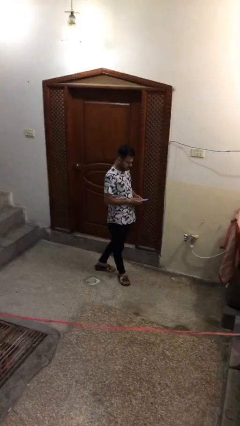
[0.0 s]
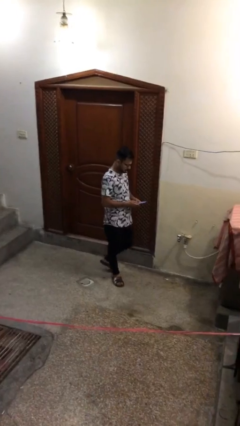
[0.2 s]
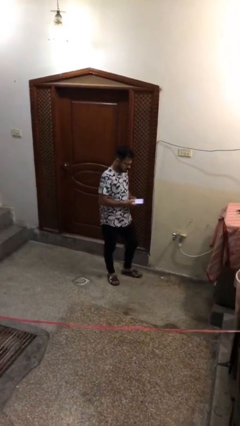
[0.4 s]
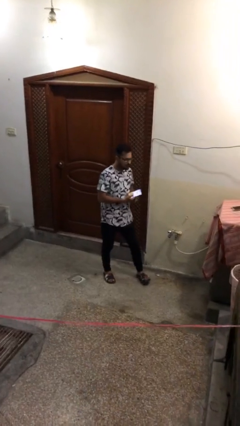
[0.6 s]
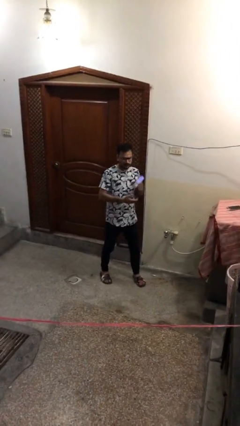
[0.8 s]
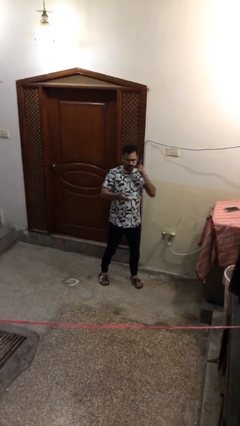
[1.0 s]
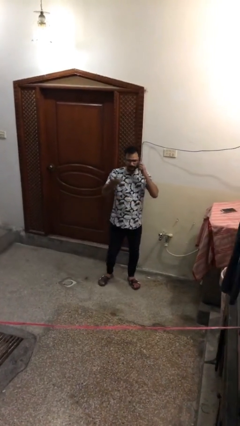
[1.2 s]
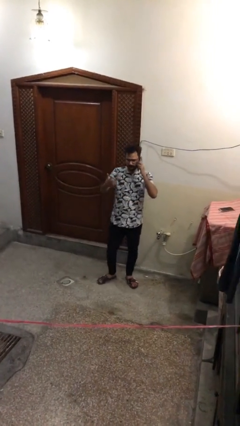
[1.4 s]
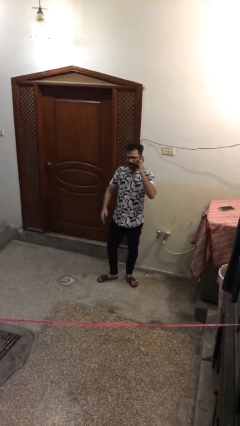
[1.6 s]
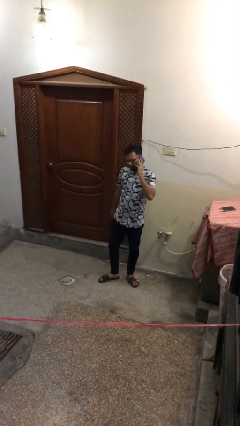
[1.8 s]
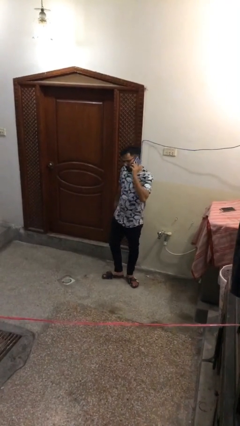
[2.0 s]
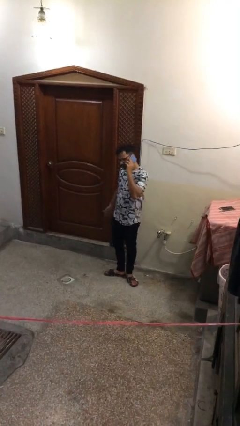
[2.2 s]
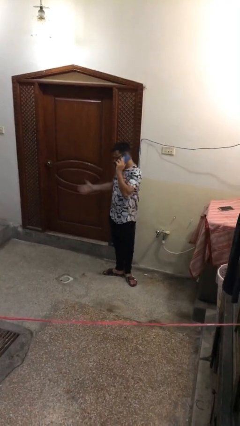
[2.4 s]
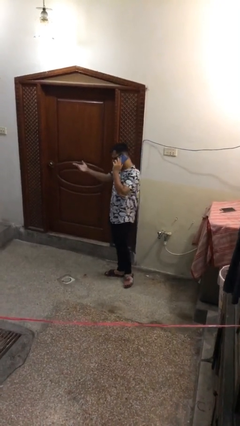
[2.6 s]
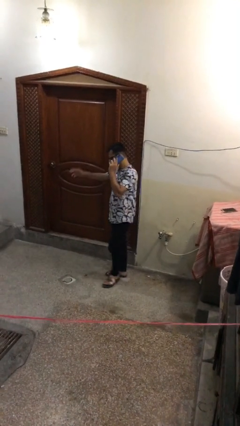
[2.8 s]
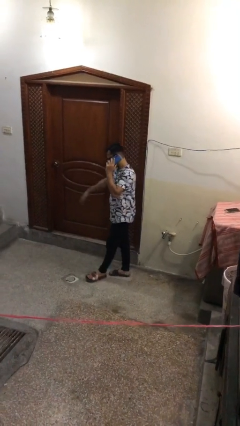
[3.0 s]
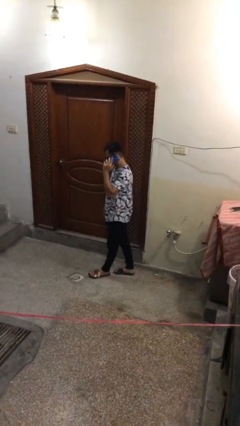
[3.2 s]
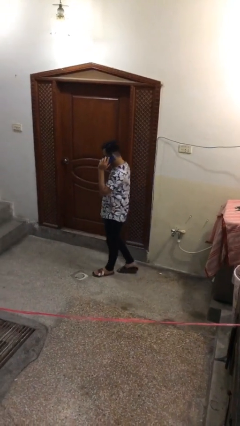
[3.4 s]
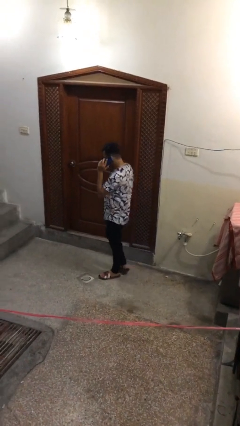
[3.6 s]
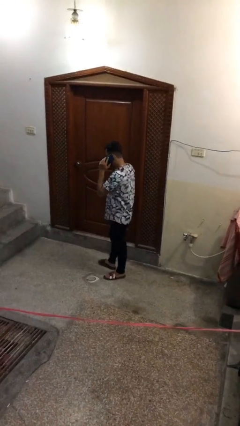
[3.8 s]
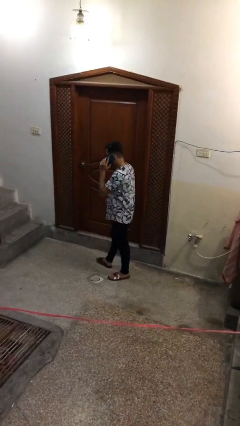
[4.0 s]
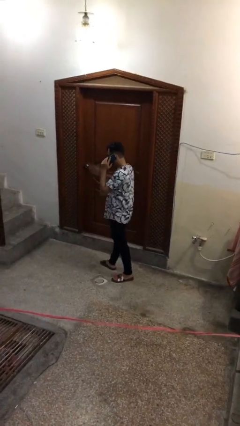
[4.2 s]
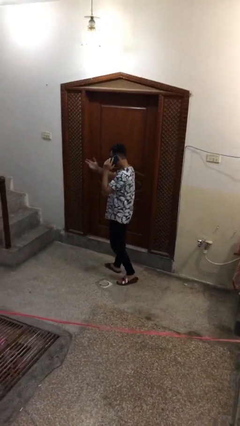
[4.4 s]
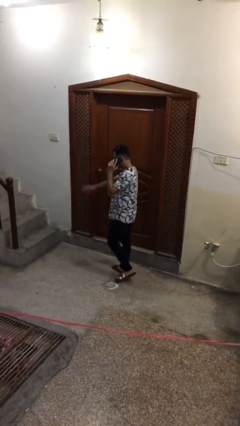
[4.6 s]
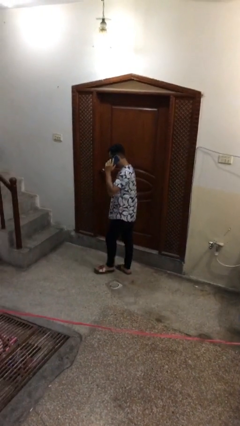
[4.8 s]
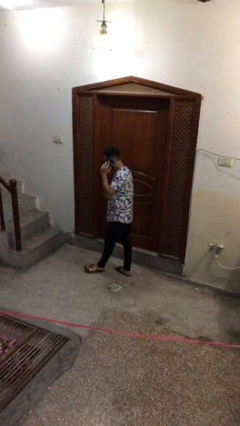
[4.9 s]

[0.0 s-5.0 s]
person talks on phone

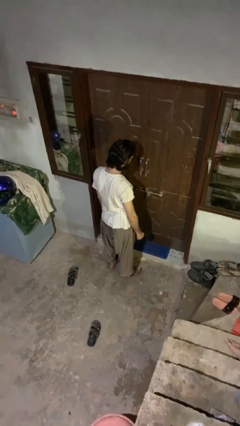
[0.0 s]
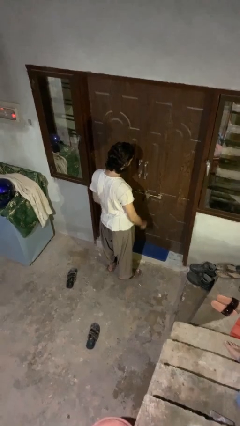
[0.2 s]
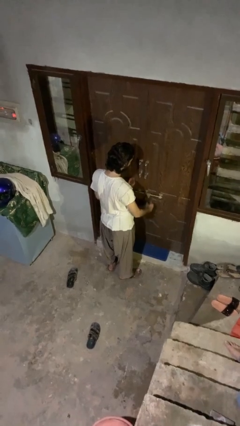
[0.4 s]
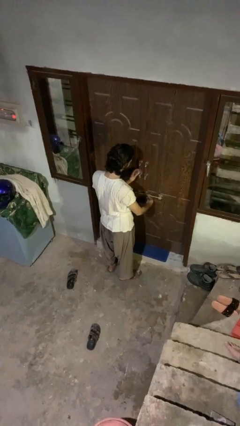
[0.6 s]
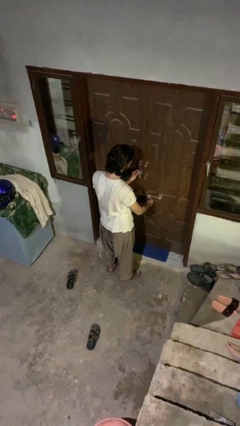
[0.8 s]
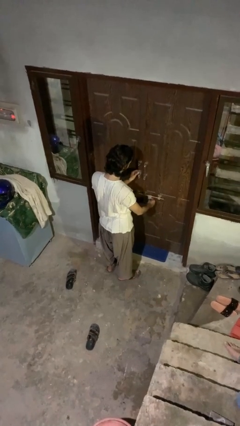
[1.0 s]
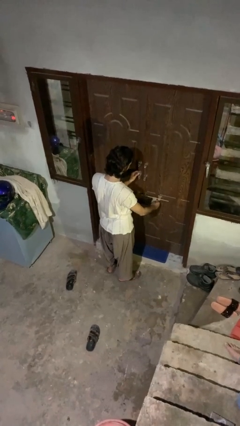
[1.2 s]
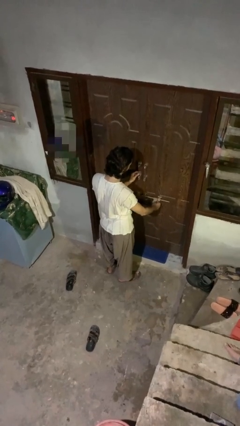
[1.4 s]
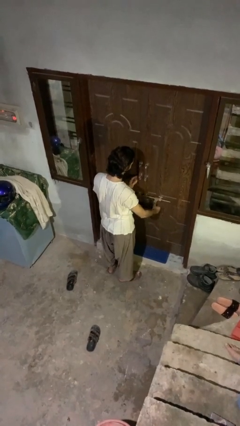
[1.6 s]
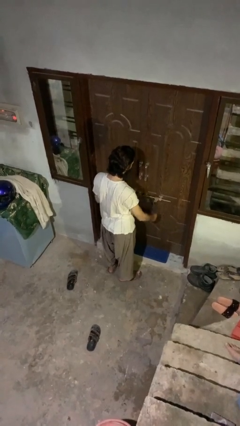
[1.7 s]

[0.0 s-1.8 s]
person unlocks door with keys

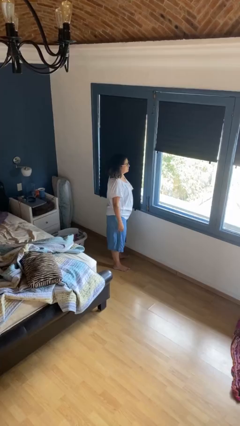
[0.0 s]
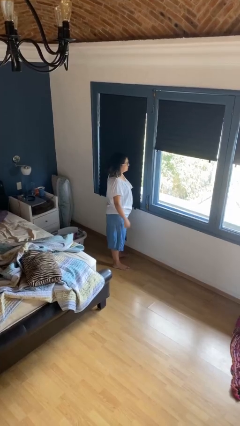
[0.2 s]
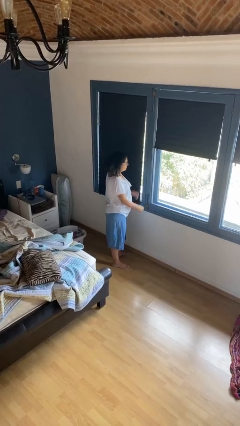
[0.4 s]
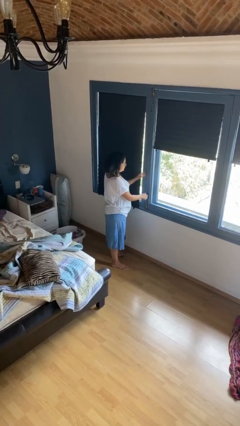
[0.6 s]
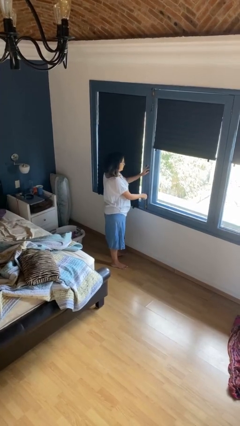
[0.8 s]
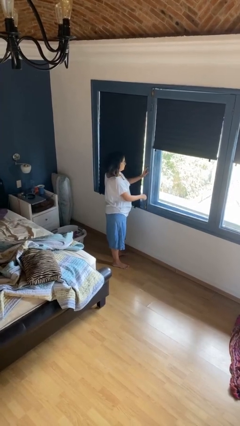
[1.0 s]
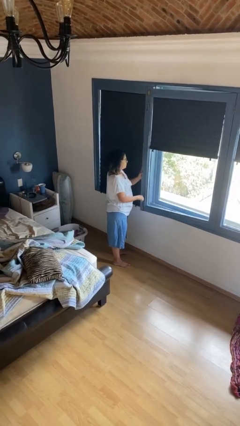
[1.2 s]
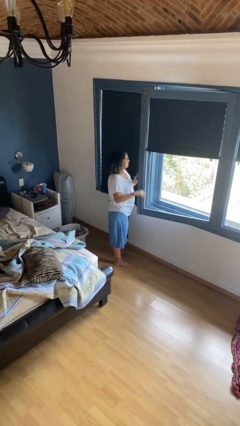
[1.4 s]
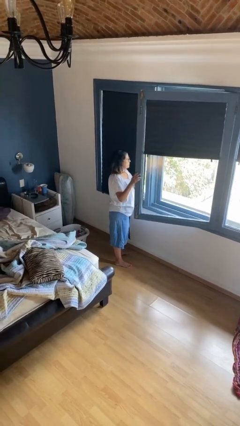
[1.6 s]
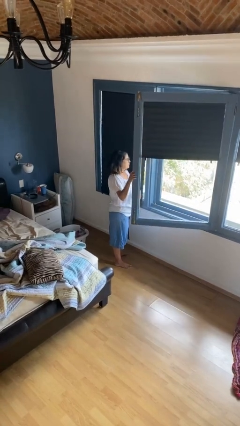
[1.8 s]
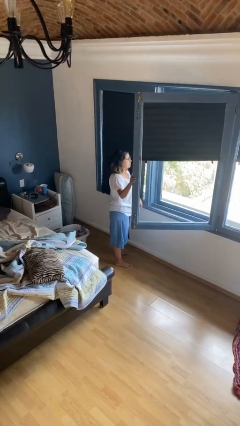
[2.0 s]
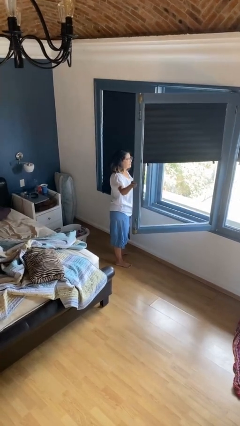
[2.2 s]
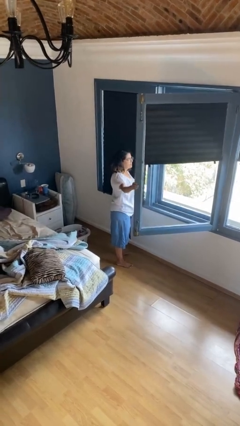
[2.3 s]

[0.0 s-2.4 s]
person opens home window

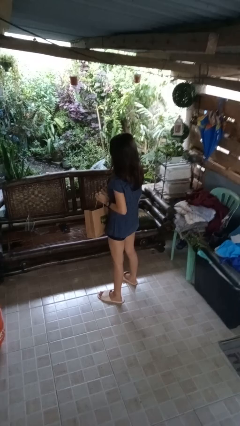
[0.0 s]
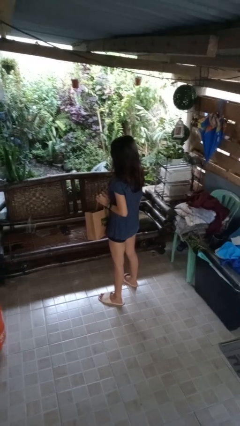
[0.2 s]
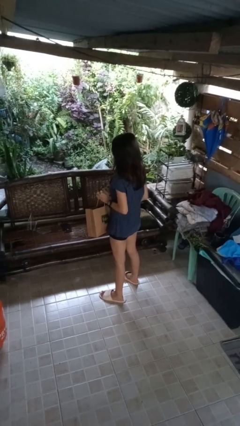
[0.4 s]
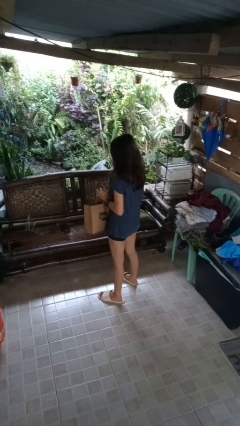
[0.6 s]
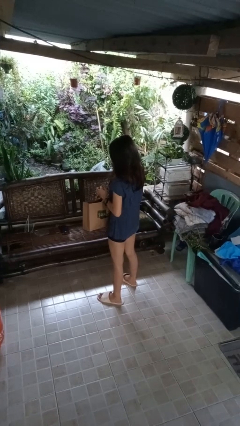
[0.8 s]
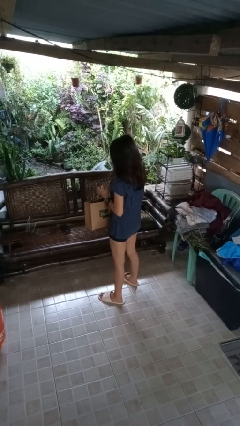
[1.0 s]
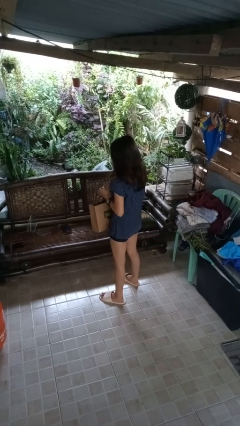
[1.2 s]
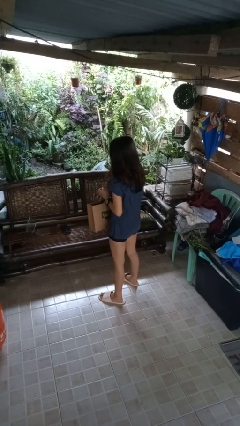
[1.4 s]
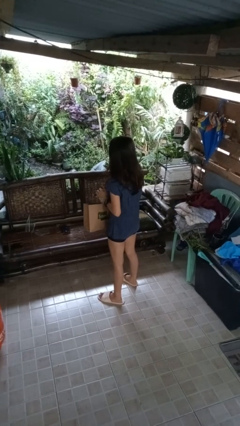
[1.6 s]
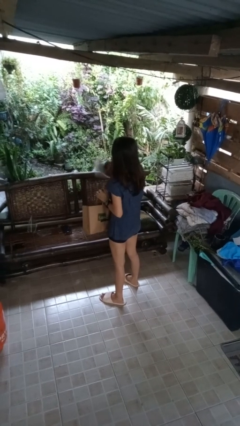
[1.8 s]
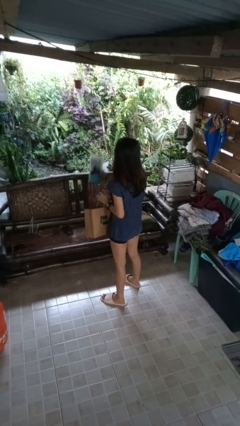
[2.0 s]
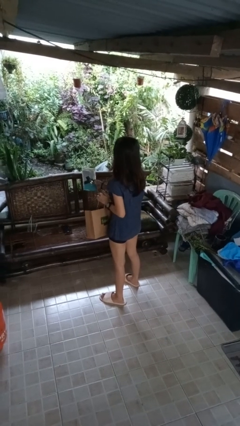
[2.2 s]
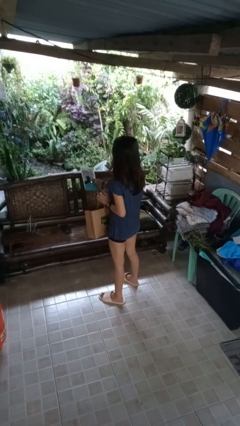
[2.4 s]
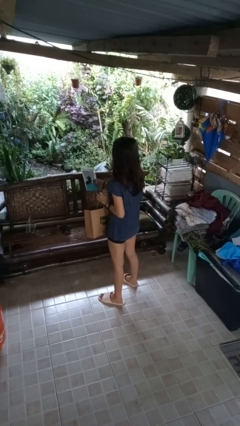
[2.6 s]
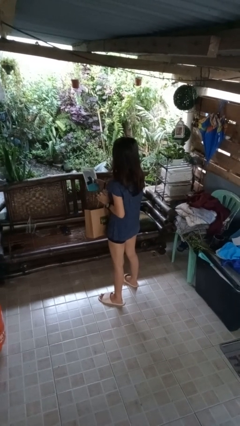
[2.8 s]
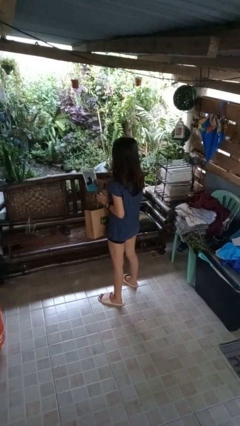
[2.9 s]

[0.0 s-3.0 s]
person takes object from bag

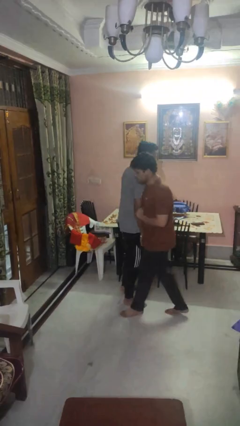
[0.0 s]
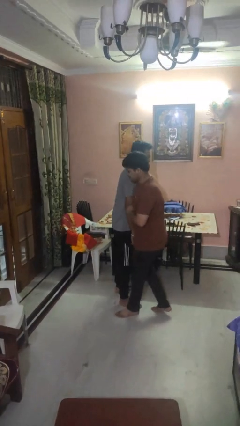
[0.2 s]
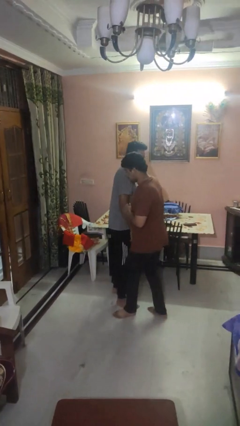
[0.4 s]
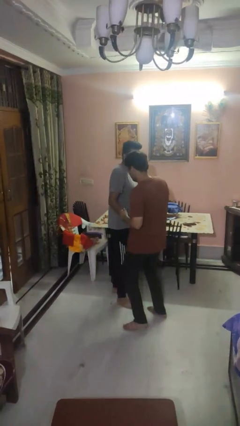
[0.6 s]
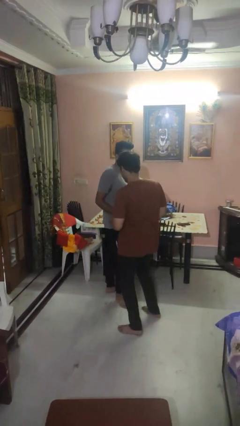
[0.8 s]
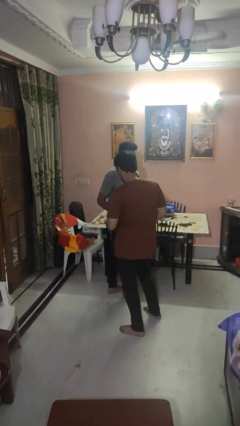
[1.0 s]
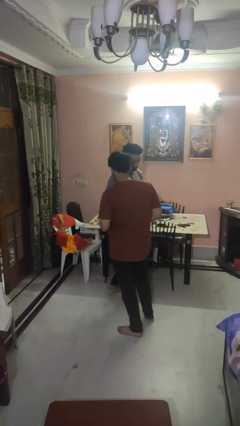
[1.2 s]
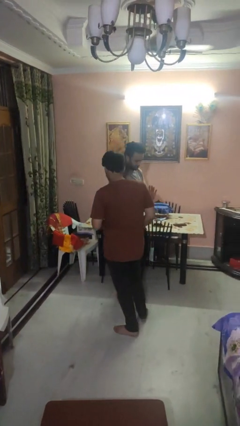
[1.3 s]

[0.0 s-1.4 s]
person bumps into person

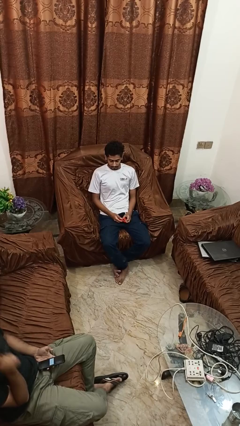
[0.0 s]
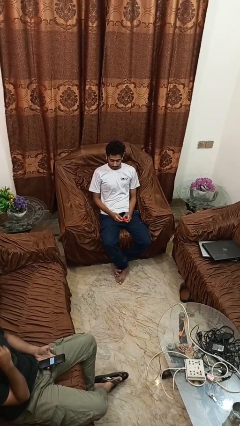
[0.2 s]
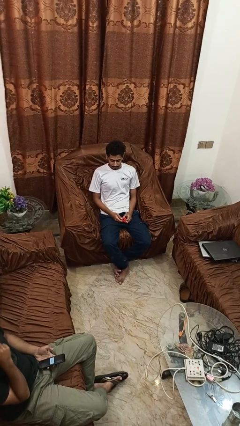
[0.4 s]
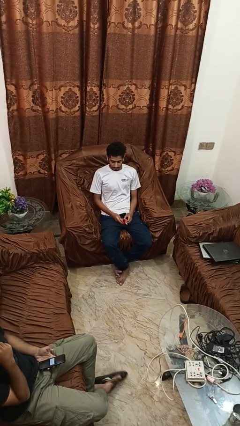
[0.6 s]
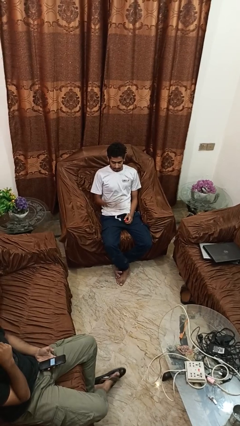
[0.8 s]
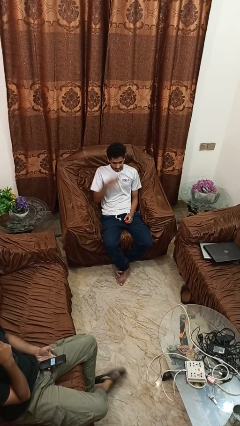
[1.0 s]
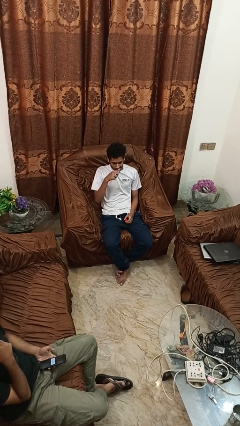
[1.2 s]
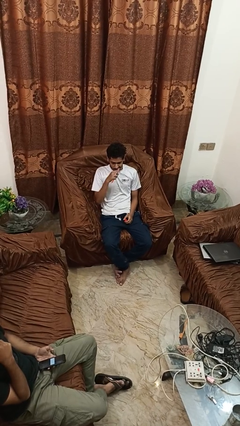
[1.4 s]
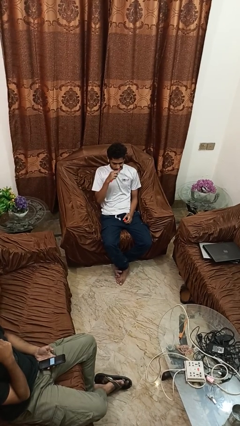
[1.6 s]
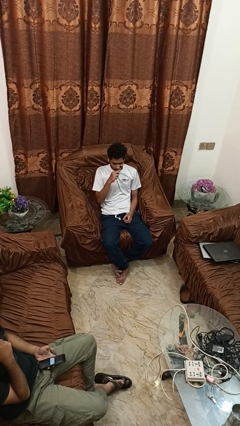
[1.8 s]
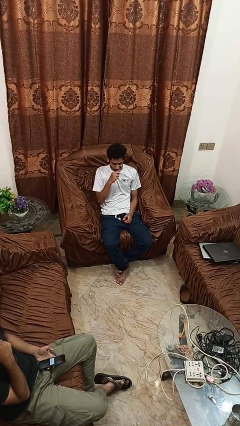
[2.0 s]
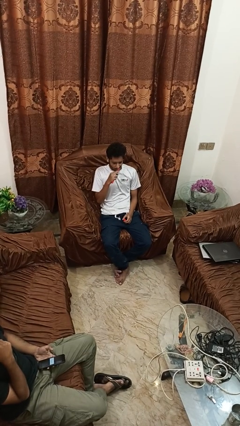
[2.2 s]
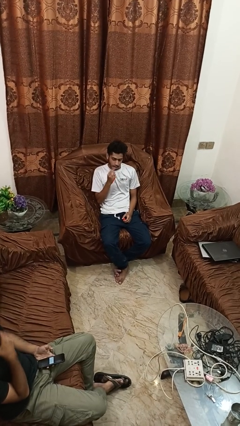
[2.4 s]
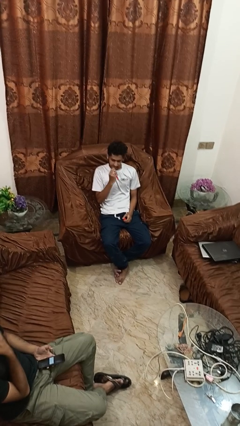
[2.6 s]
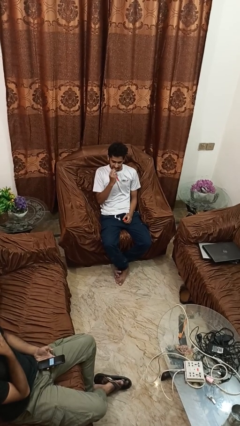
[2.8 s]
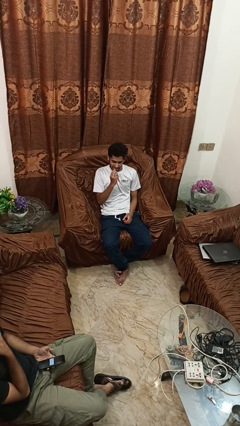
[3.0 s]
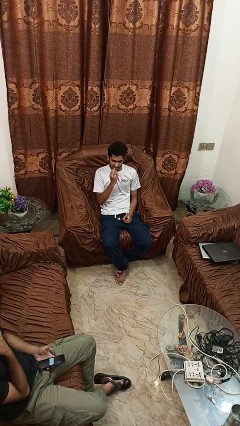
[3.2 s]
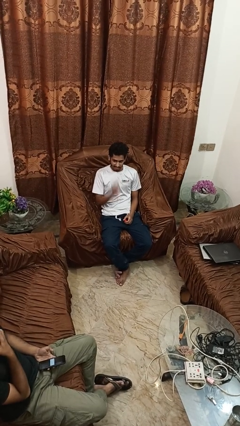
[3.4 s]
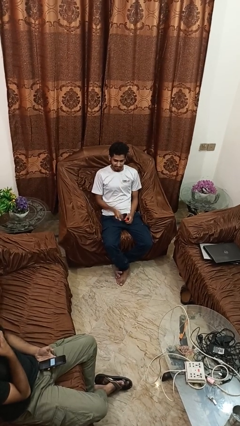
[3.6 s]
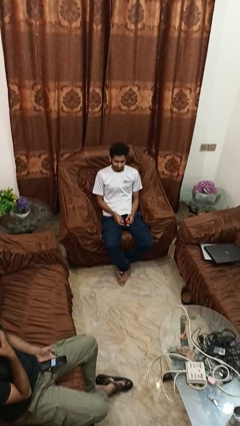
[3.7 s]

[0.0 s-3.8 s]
person brushes teeth

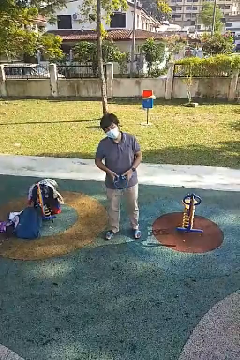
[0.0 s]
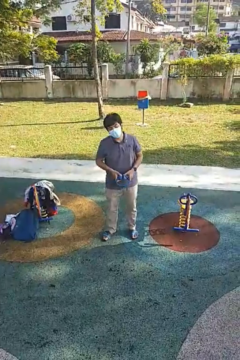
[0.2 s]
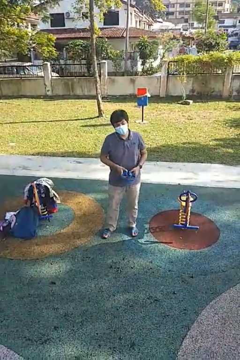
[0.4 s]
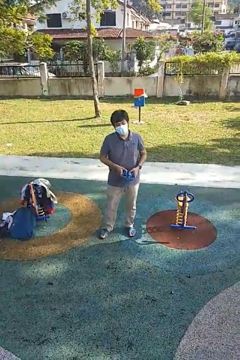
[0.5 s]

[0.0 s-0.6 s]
person takes off headphones
